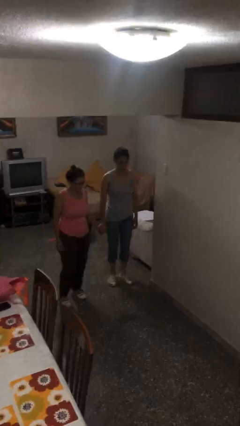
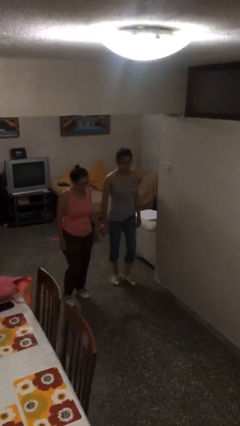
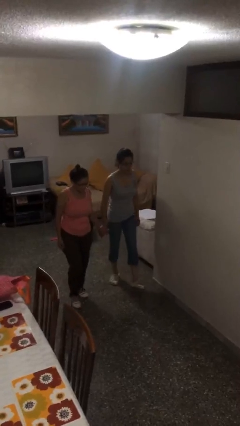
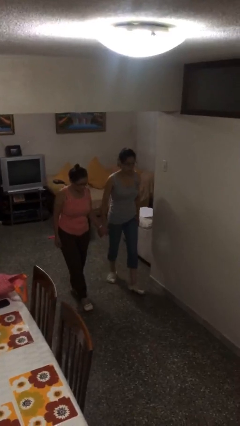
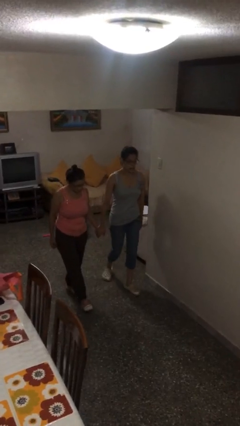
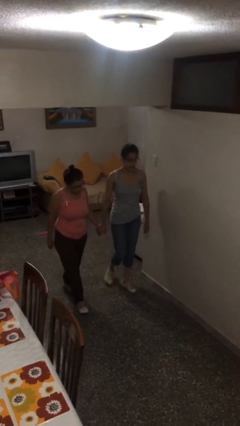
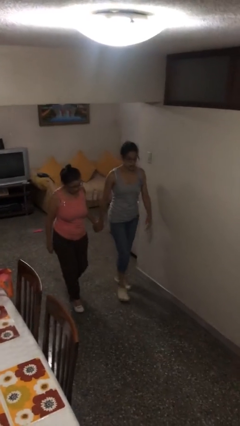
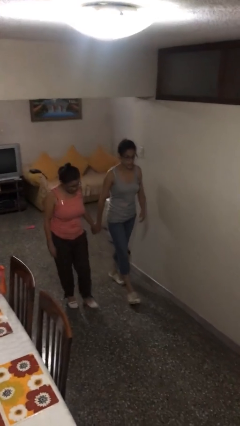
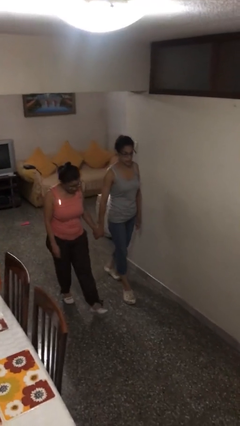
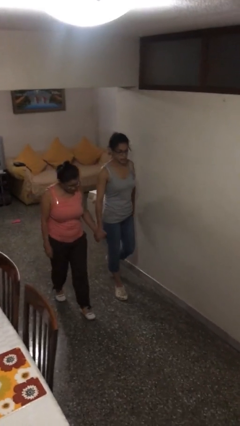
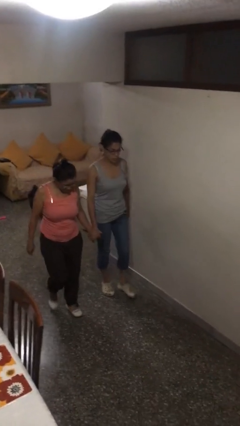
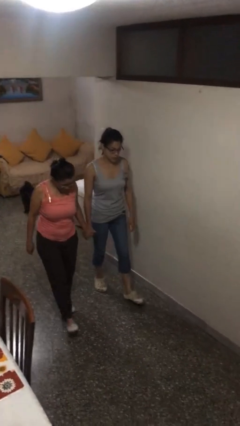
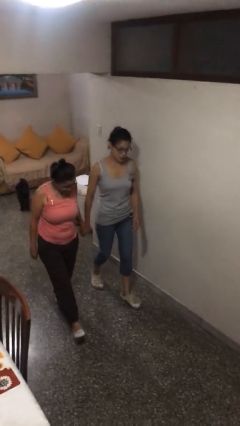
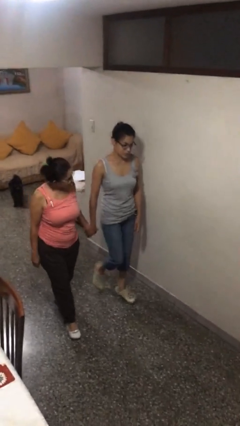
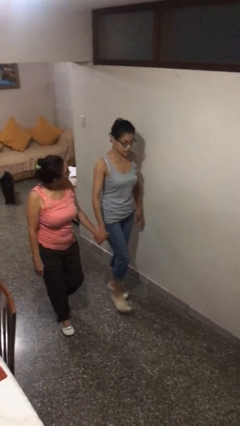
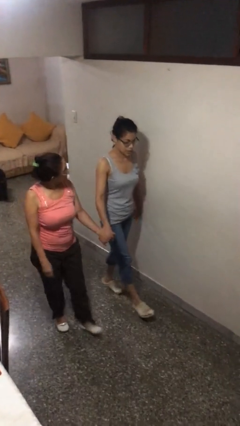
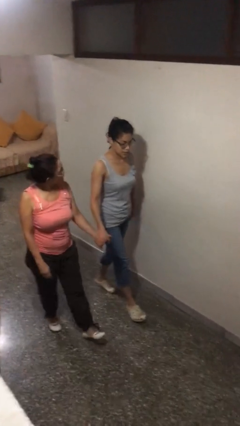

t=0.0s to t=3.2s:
person holds hand

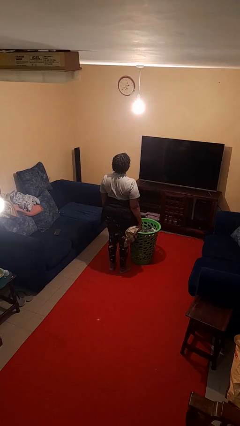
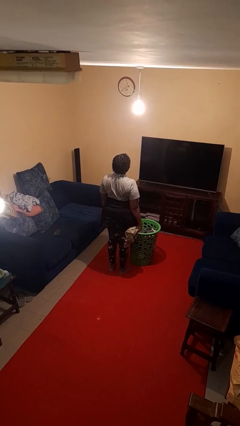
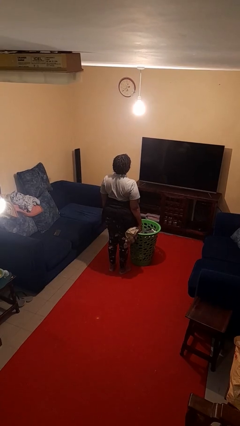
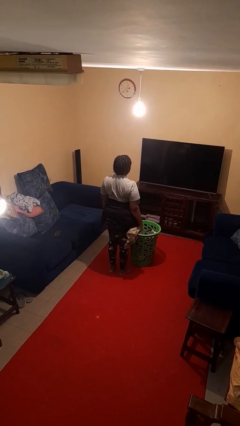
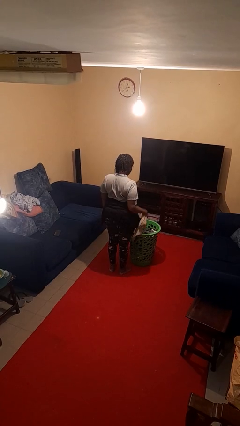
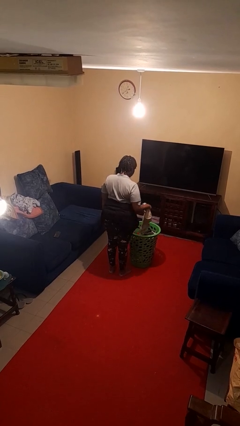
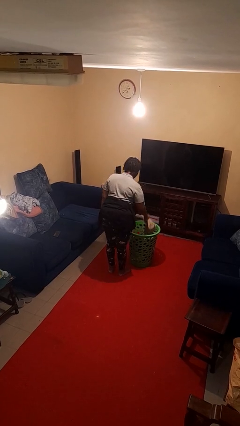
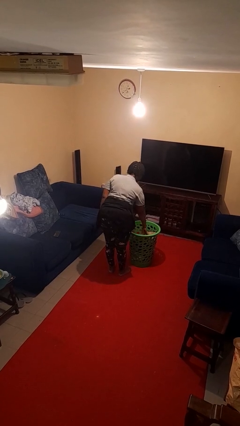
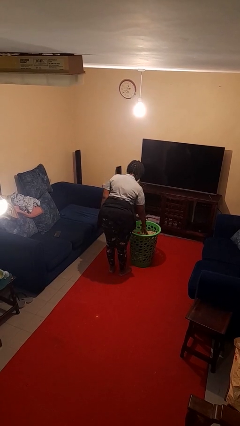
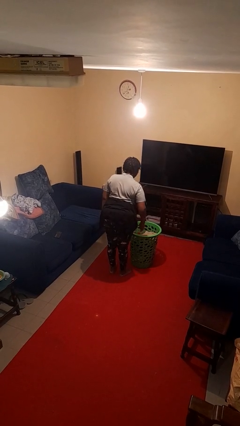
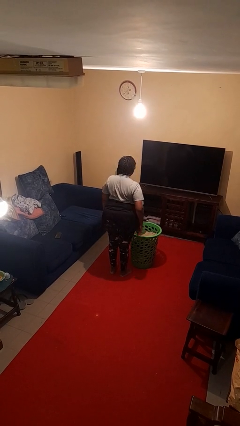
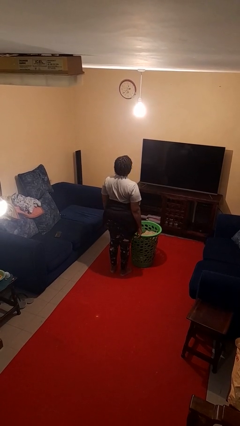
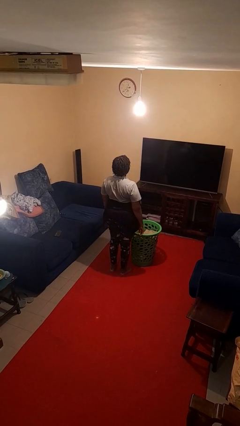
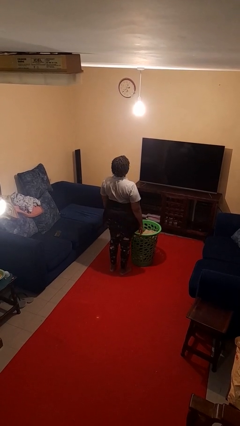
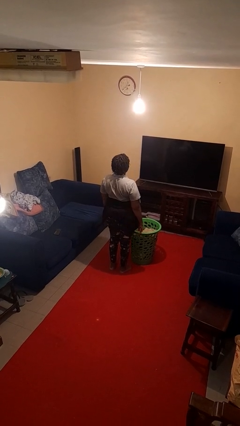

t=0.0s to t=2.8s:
person puts object into basket

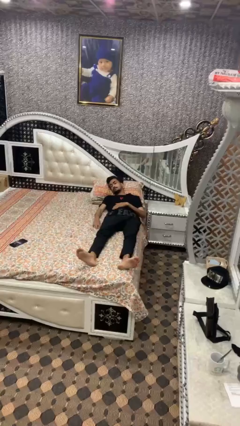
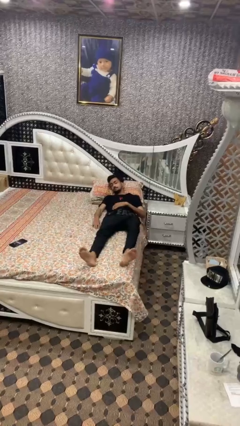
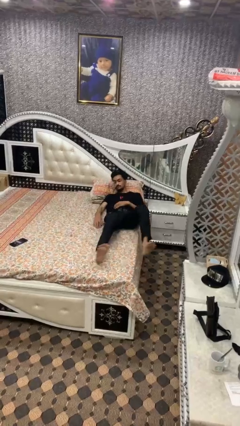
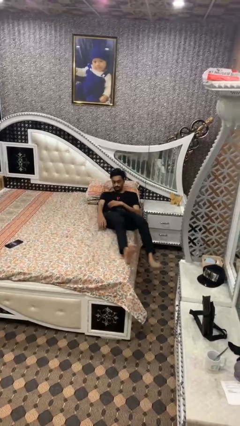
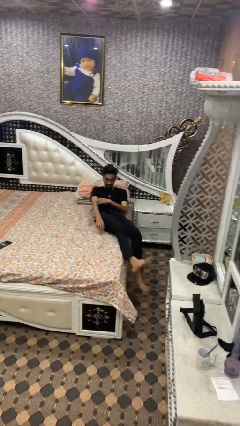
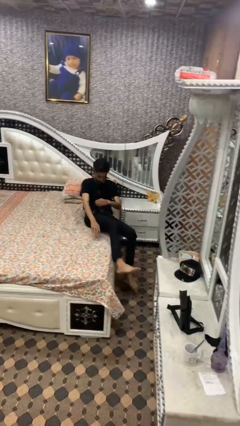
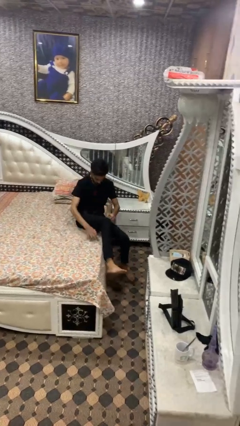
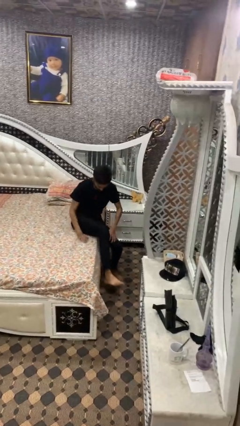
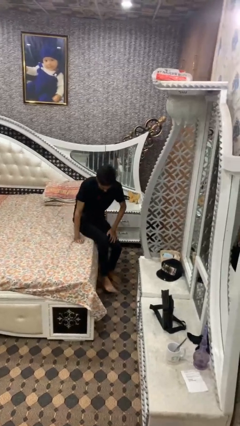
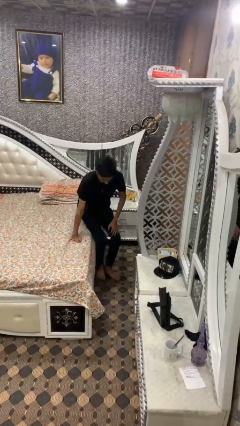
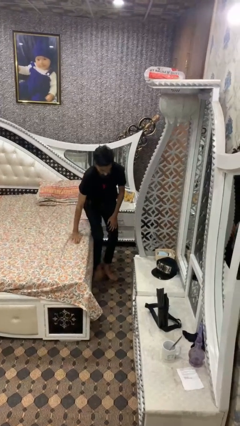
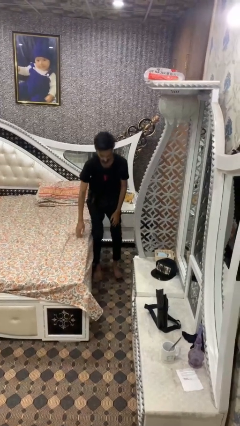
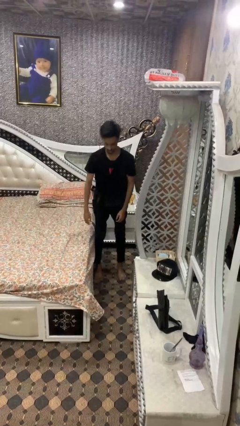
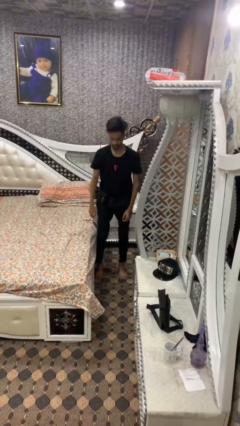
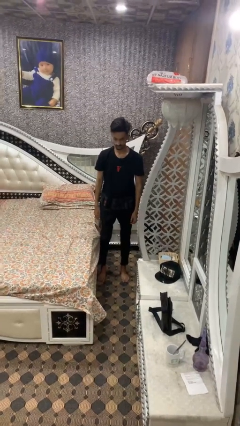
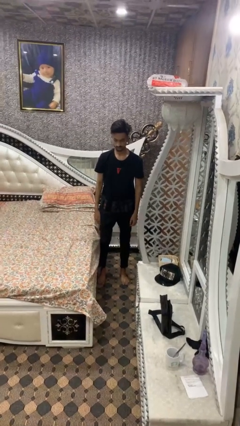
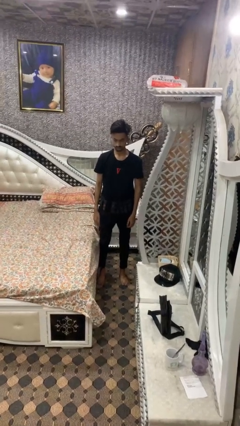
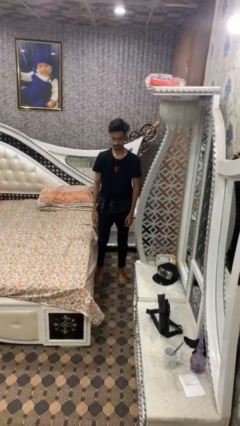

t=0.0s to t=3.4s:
person stands up

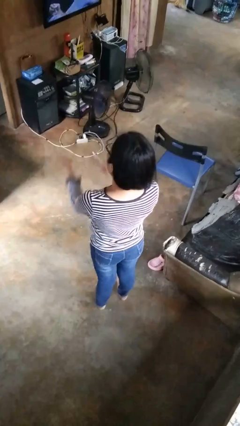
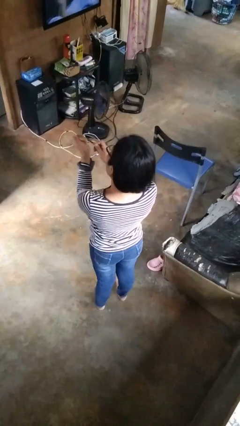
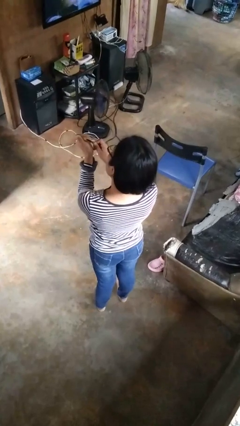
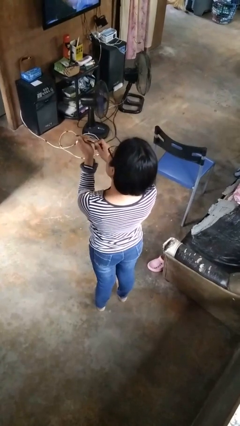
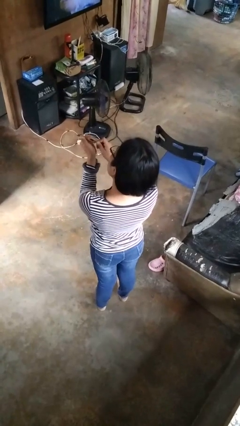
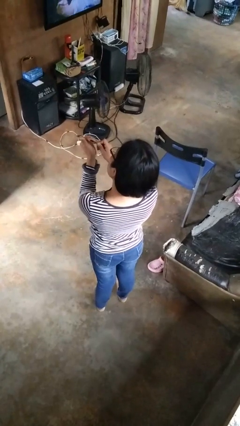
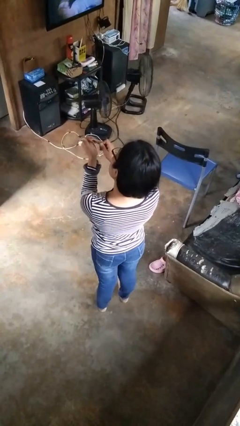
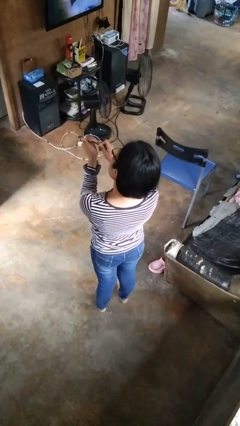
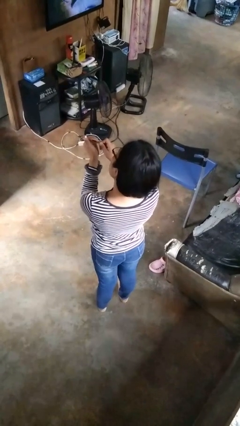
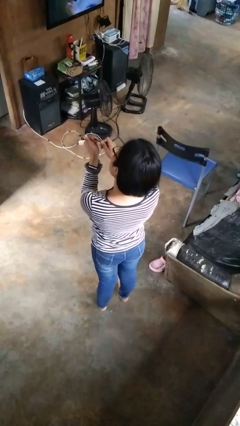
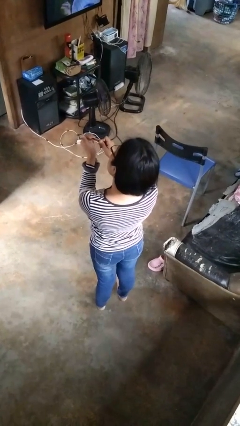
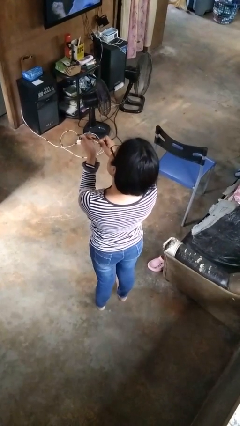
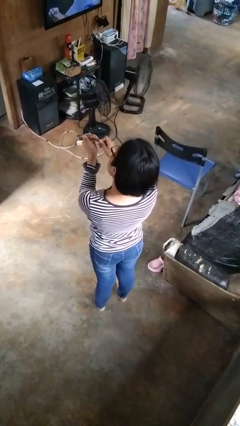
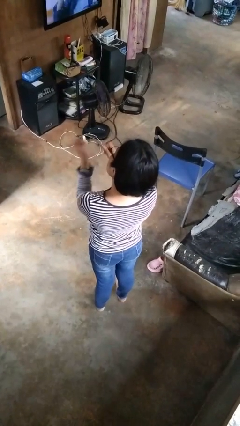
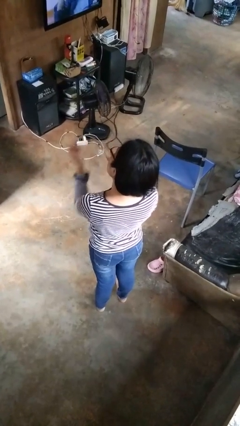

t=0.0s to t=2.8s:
person files fingernails

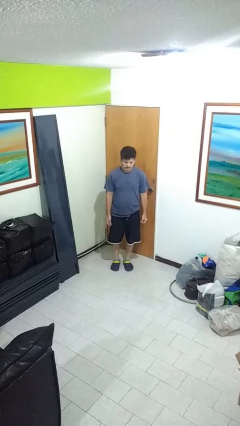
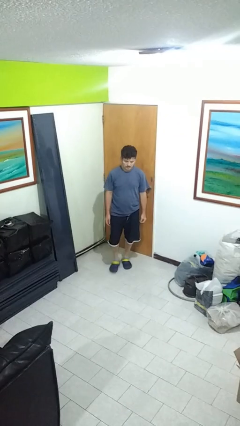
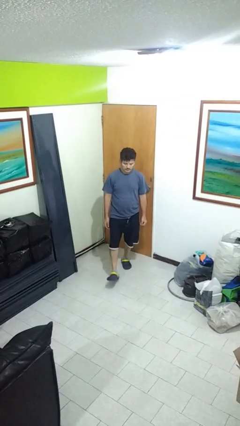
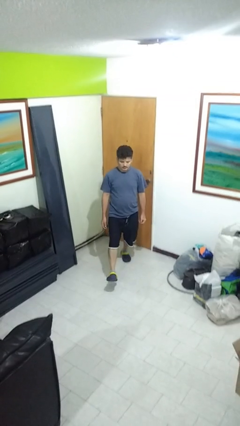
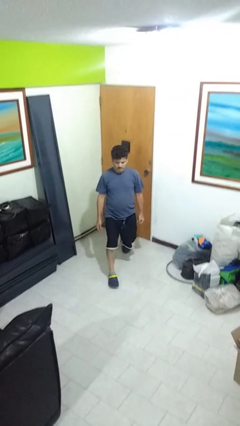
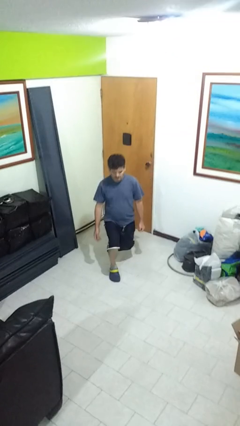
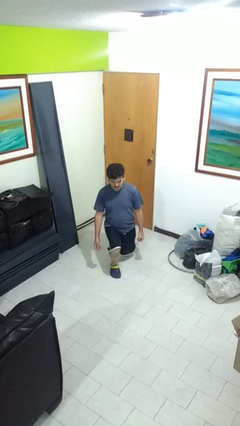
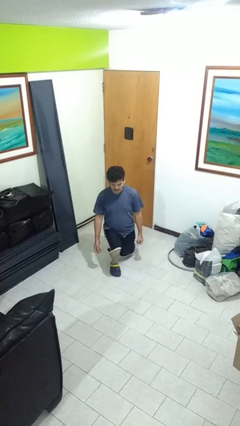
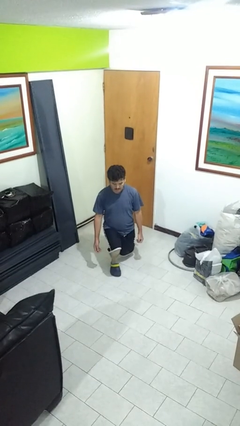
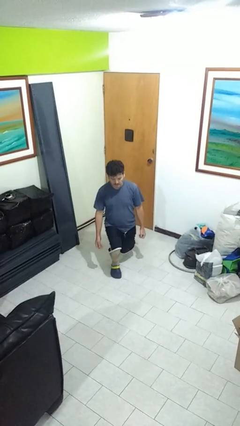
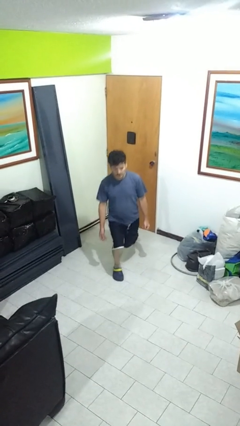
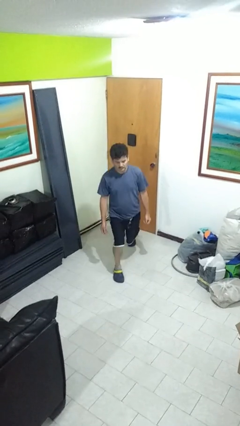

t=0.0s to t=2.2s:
person exercises with lunges

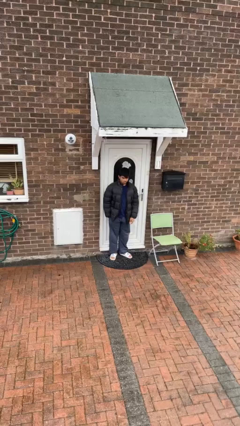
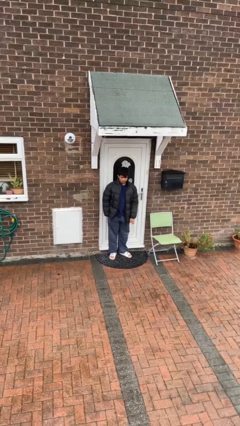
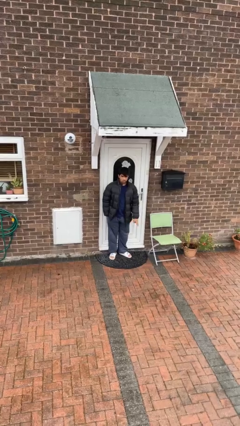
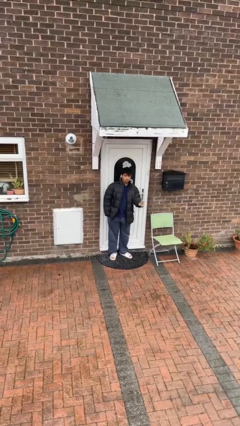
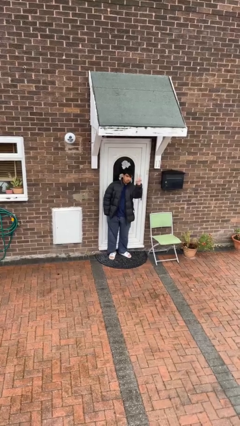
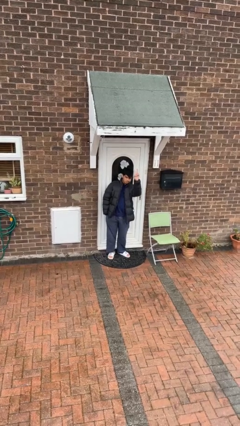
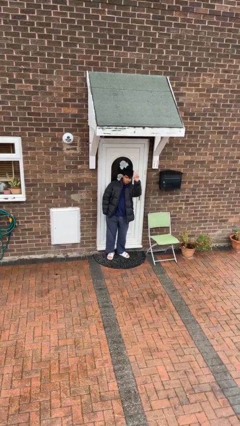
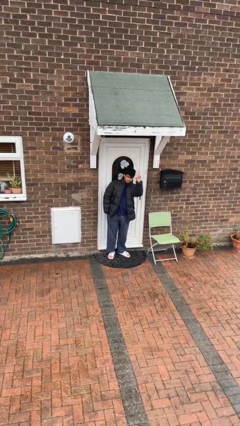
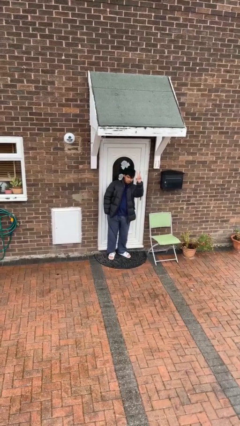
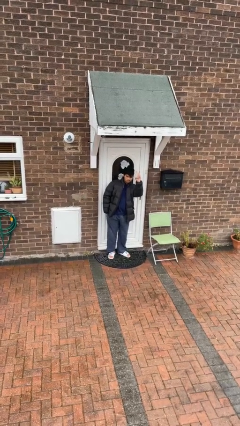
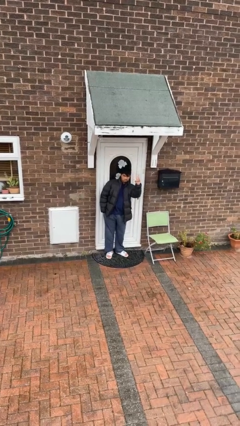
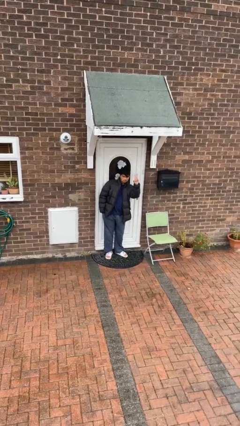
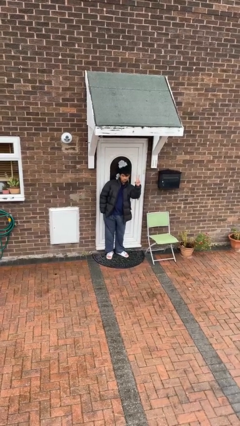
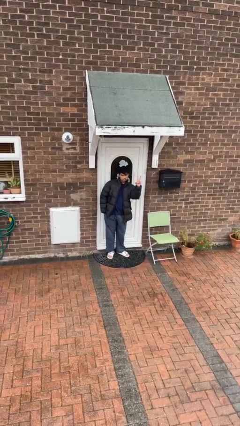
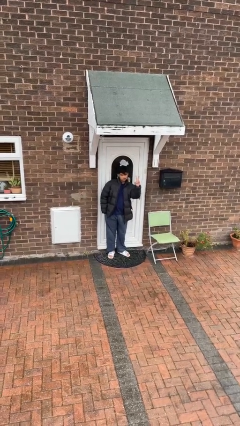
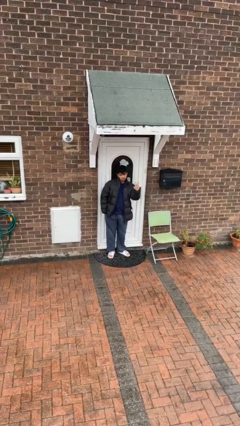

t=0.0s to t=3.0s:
person gestures peace
